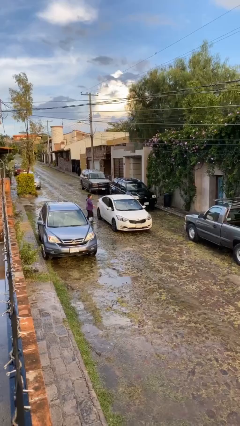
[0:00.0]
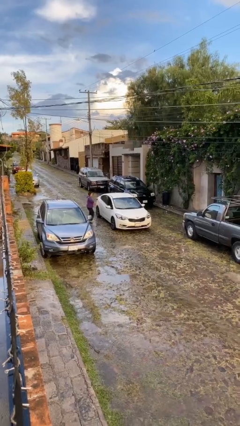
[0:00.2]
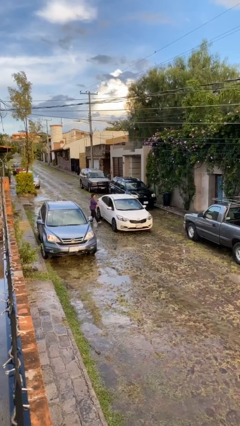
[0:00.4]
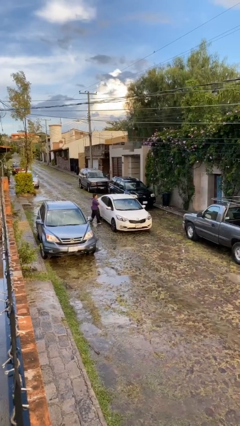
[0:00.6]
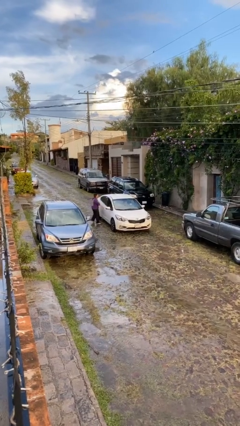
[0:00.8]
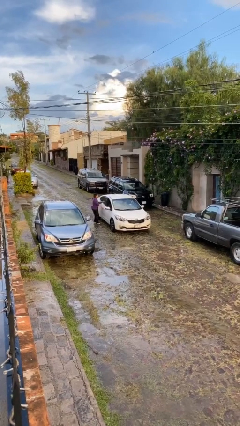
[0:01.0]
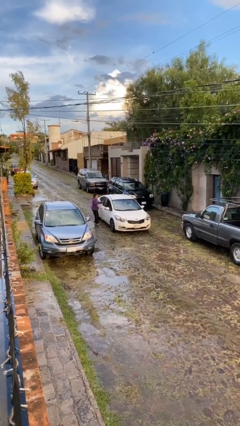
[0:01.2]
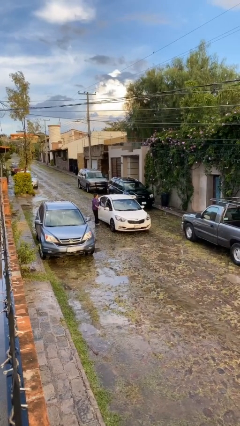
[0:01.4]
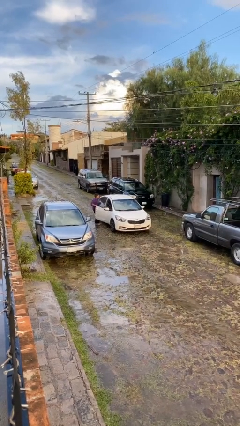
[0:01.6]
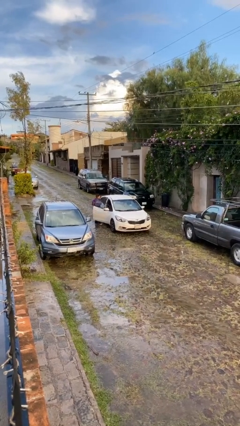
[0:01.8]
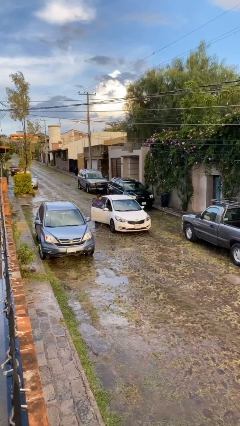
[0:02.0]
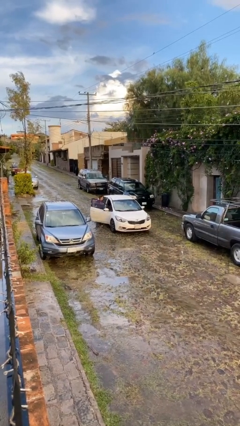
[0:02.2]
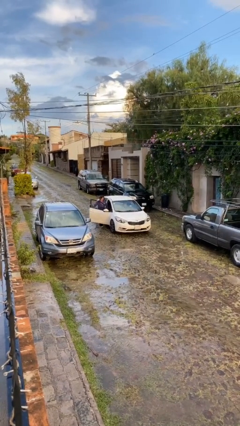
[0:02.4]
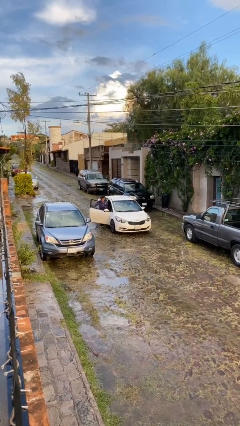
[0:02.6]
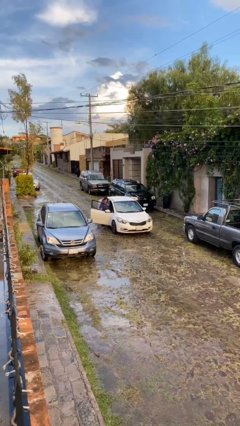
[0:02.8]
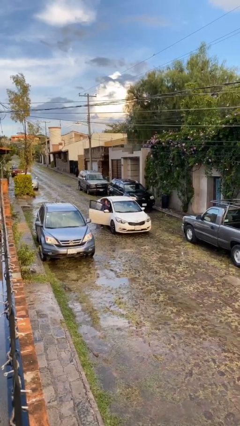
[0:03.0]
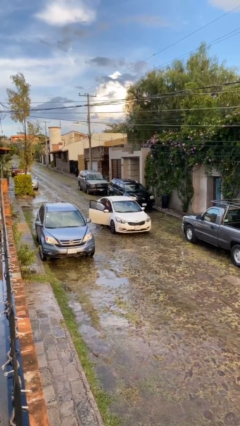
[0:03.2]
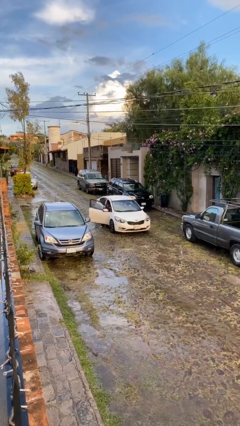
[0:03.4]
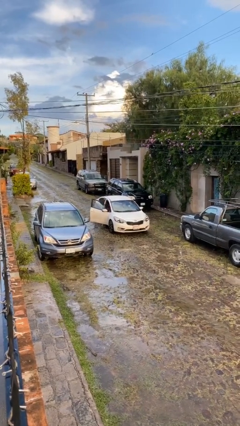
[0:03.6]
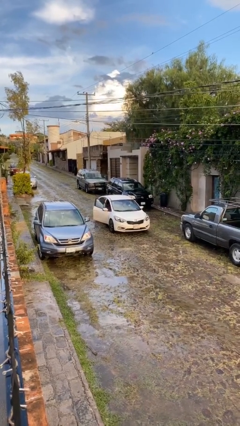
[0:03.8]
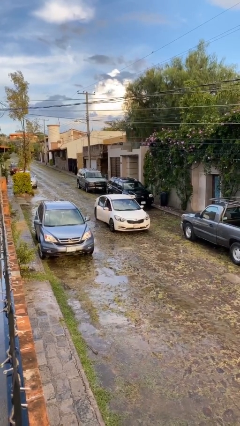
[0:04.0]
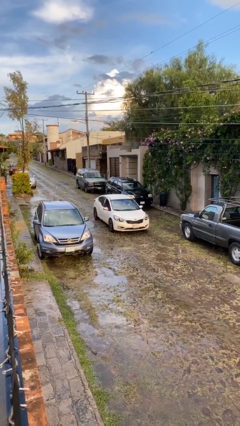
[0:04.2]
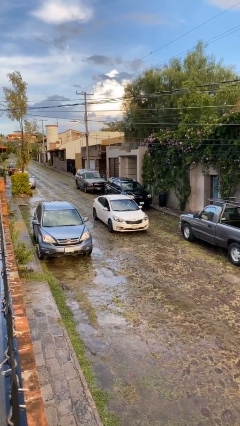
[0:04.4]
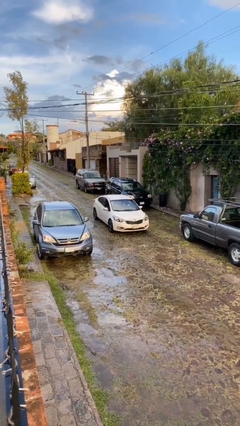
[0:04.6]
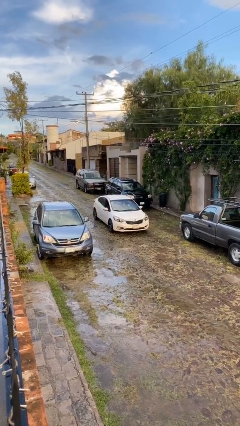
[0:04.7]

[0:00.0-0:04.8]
car picks up person

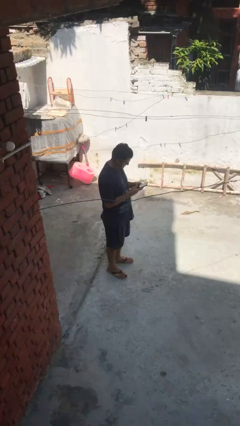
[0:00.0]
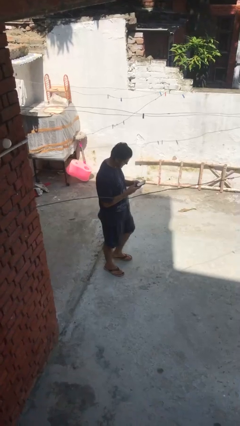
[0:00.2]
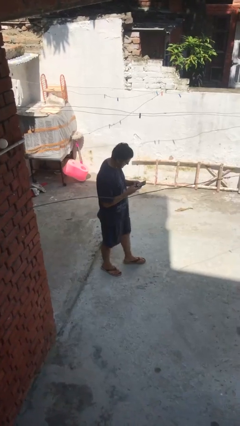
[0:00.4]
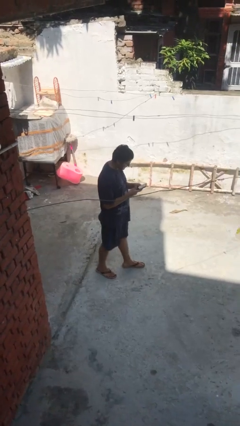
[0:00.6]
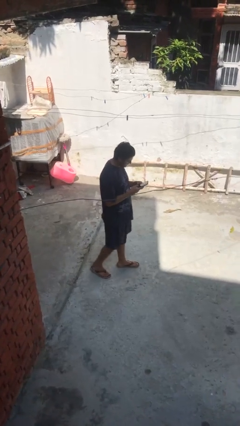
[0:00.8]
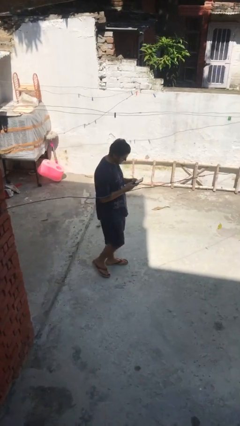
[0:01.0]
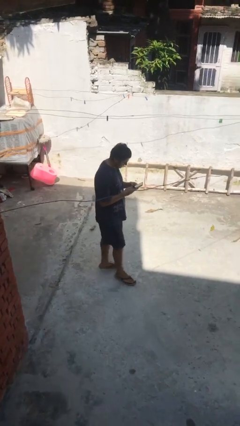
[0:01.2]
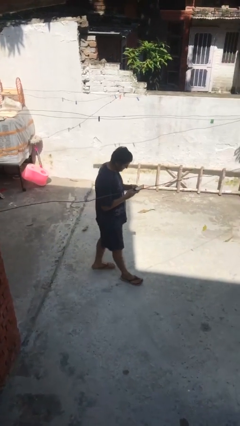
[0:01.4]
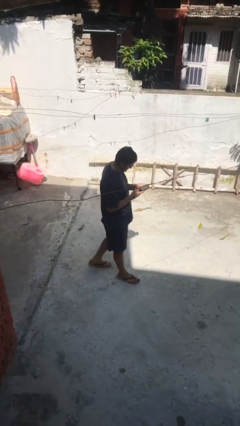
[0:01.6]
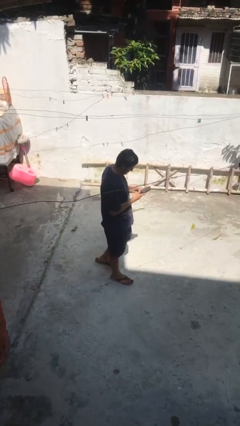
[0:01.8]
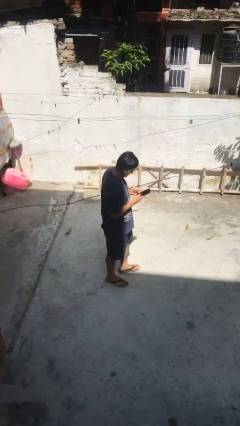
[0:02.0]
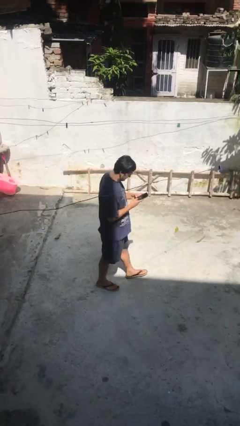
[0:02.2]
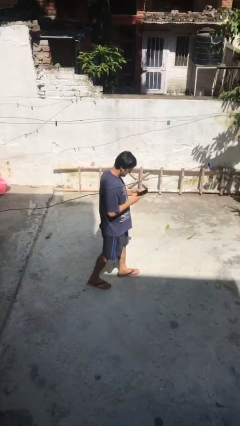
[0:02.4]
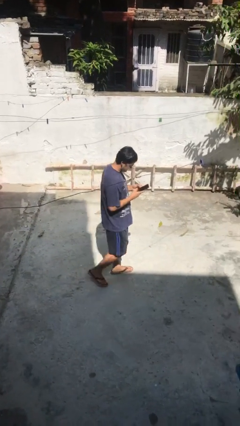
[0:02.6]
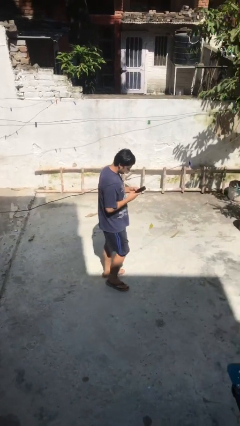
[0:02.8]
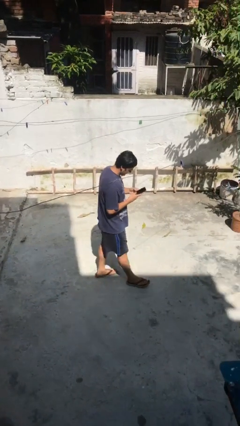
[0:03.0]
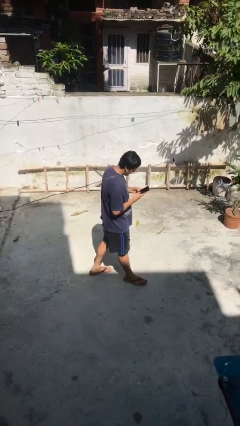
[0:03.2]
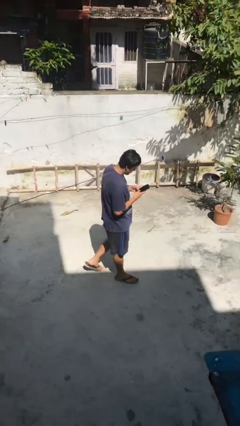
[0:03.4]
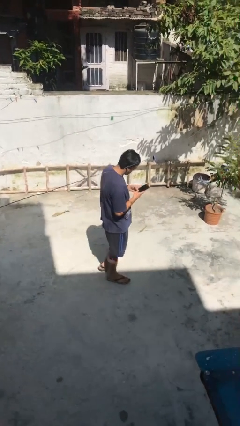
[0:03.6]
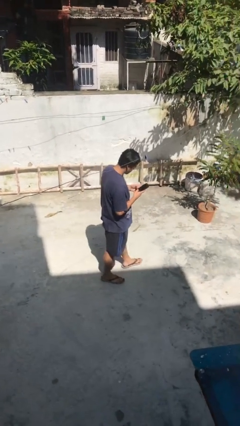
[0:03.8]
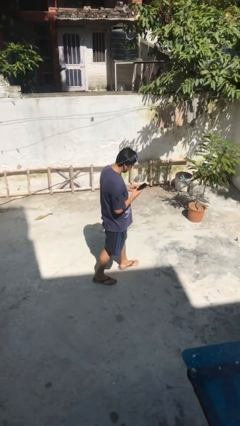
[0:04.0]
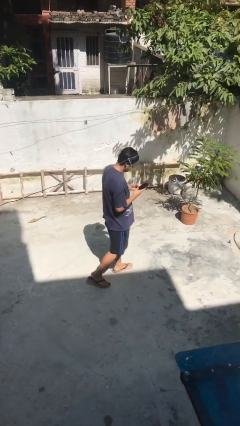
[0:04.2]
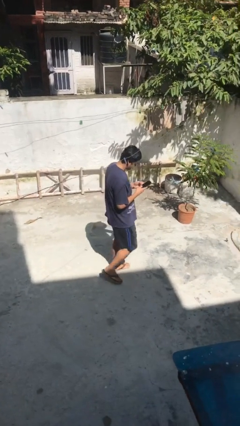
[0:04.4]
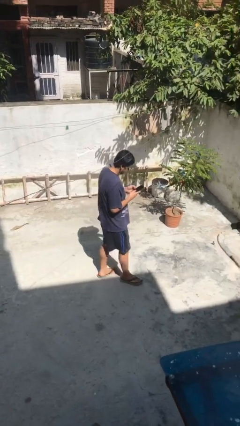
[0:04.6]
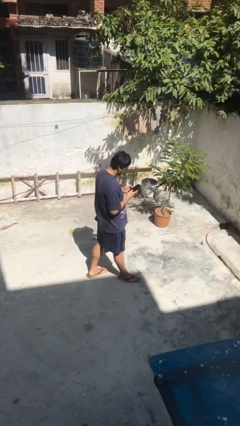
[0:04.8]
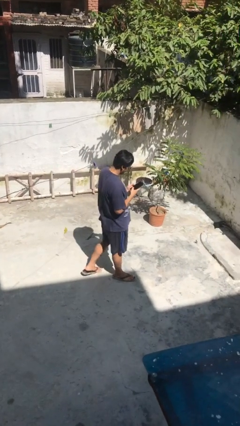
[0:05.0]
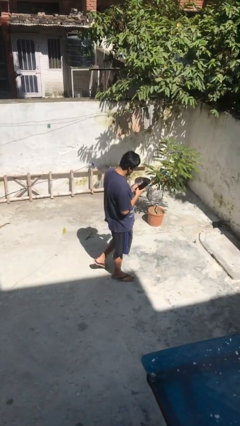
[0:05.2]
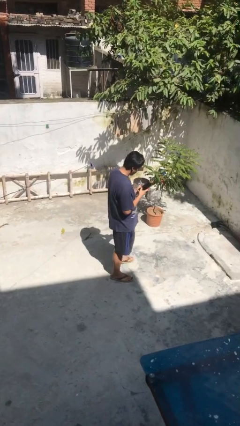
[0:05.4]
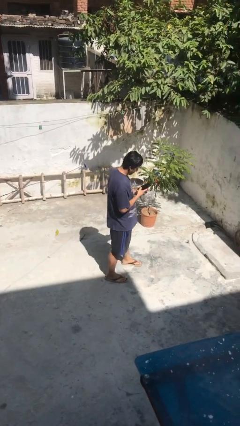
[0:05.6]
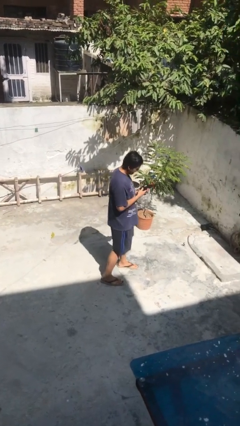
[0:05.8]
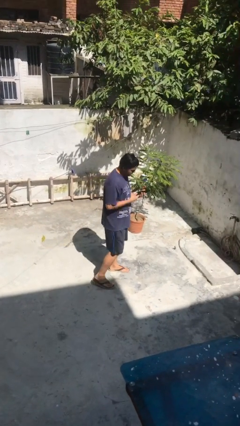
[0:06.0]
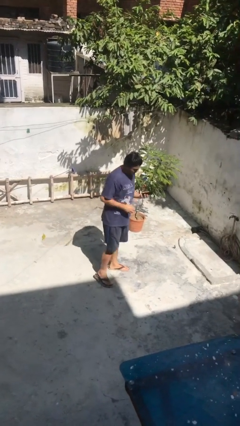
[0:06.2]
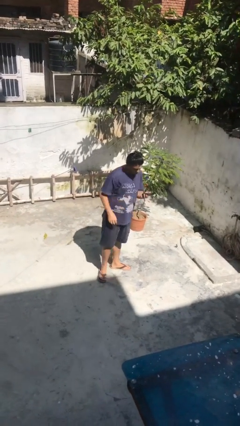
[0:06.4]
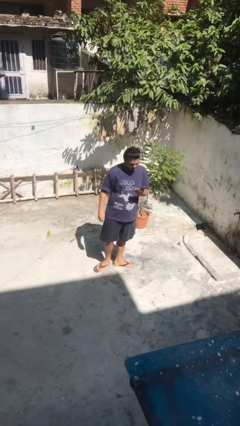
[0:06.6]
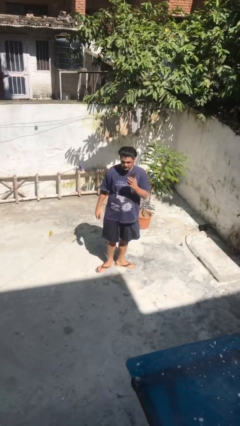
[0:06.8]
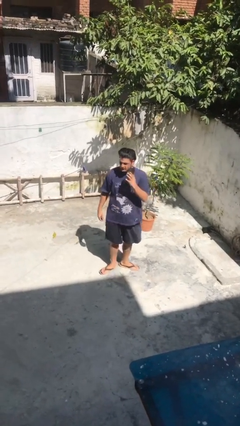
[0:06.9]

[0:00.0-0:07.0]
person texts on phone

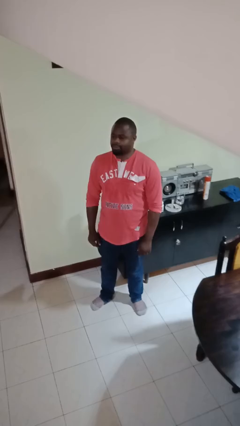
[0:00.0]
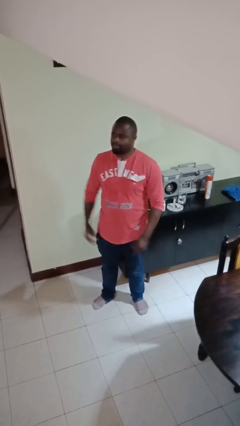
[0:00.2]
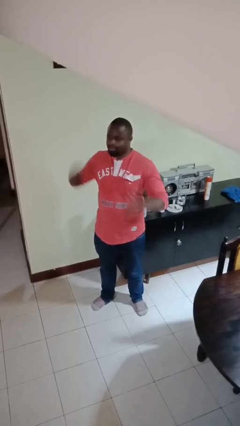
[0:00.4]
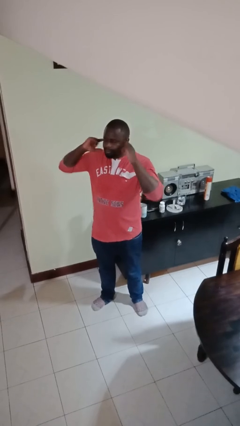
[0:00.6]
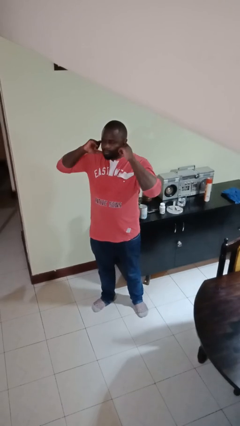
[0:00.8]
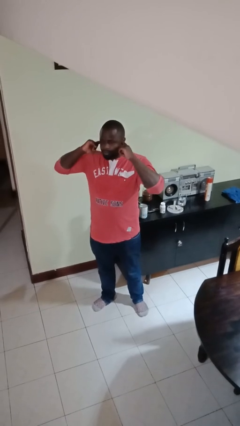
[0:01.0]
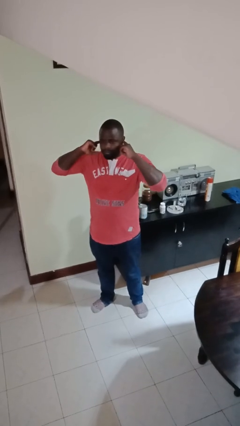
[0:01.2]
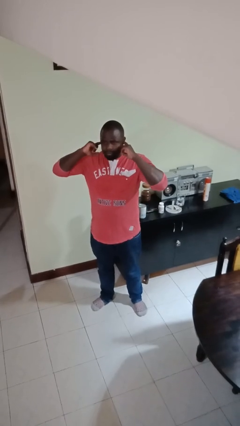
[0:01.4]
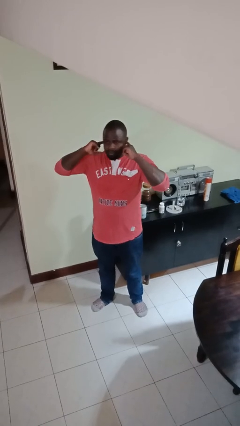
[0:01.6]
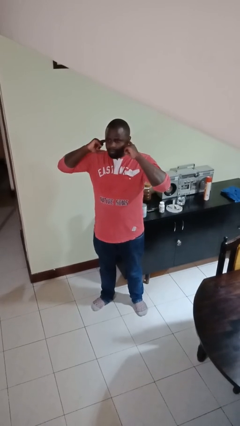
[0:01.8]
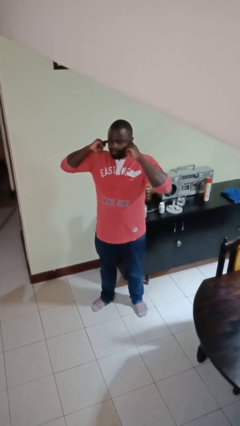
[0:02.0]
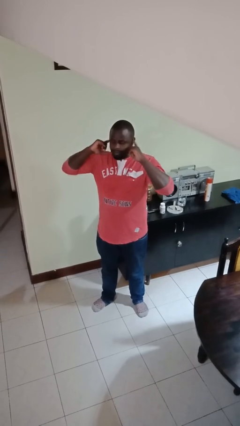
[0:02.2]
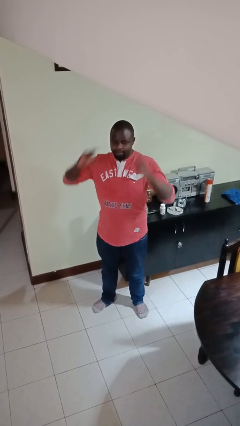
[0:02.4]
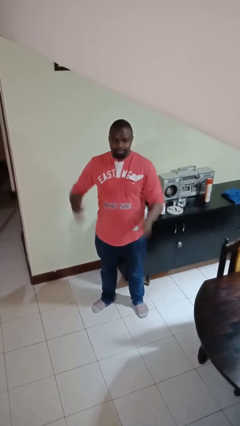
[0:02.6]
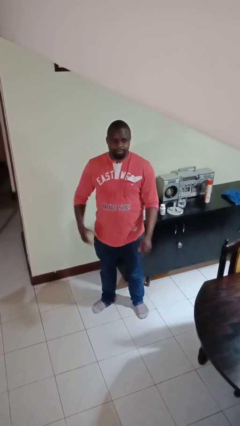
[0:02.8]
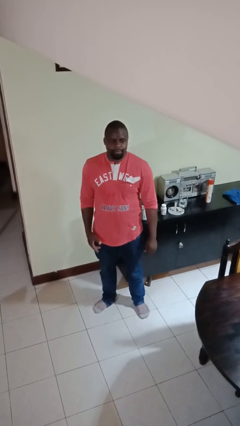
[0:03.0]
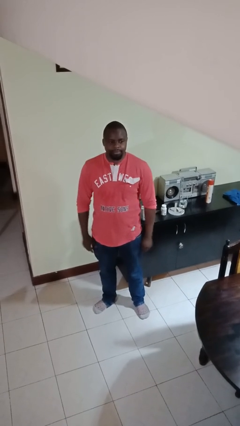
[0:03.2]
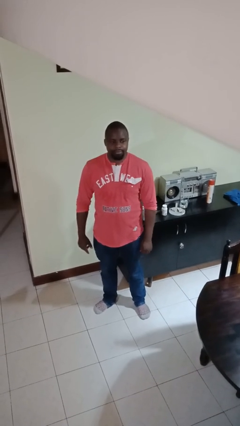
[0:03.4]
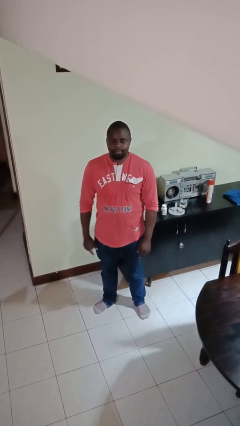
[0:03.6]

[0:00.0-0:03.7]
person puts fingers in ear

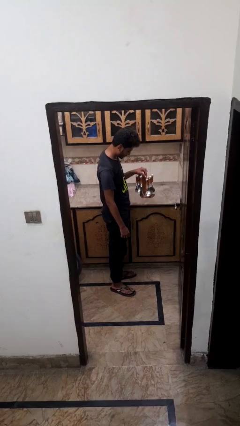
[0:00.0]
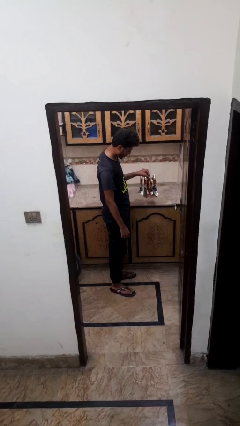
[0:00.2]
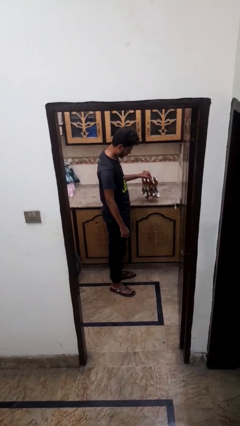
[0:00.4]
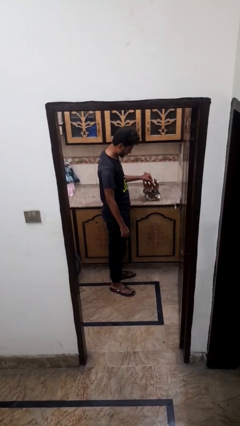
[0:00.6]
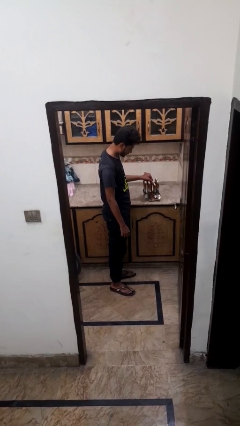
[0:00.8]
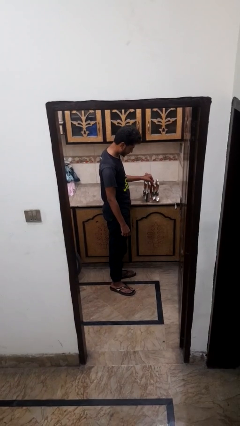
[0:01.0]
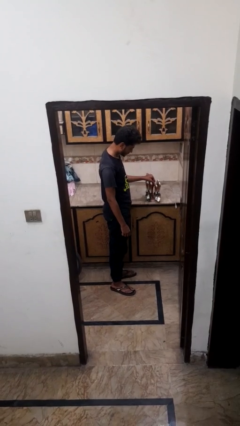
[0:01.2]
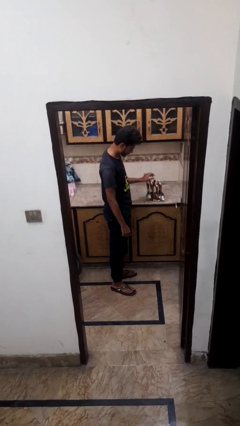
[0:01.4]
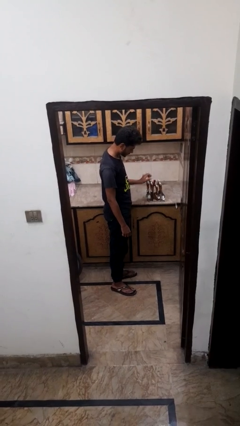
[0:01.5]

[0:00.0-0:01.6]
person puts down object on countertop

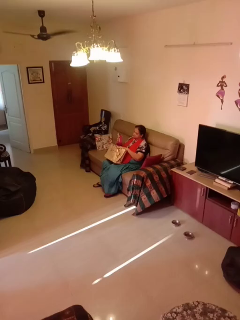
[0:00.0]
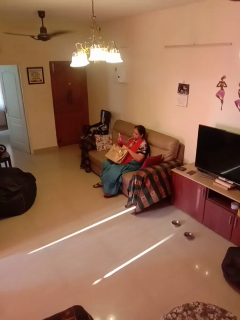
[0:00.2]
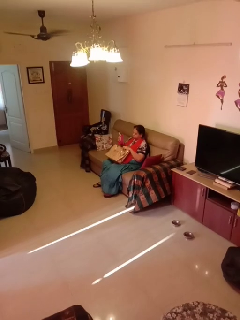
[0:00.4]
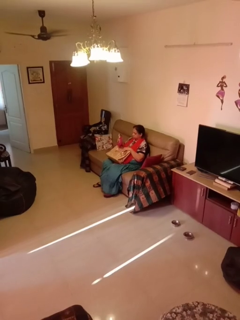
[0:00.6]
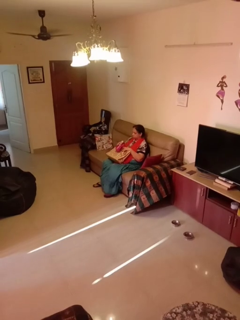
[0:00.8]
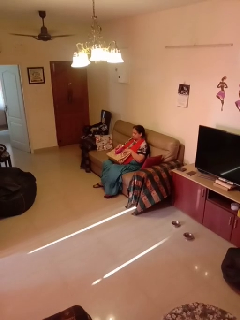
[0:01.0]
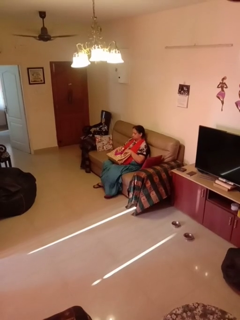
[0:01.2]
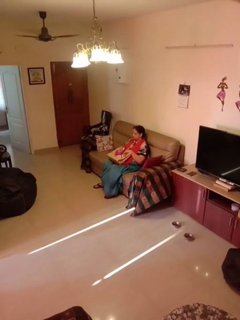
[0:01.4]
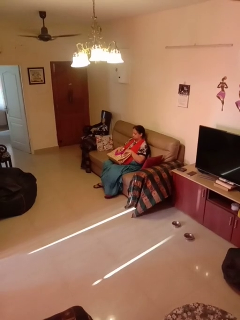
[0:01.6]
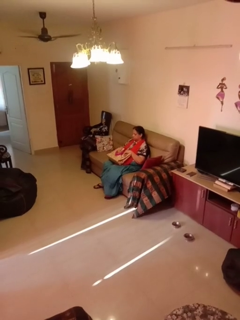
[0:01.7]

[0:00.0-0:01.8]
person takes object from purse
